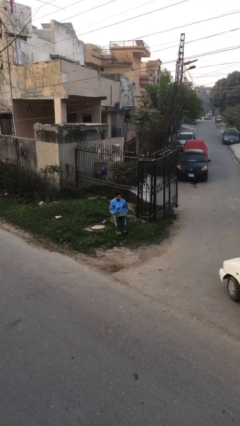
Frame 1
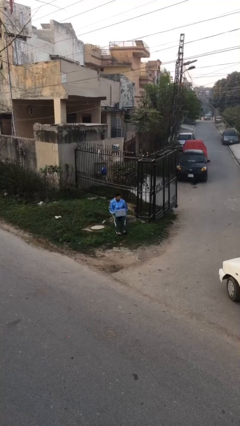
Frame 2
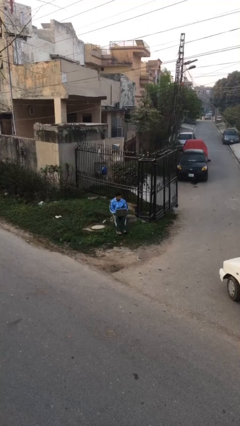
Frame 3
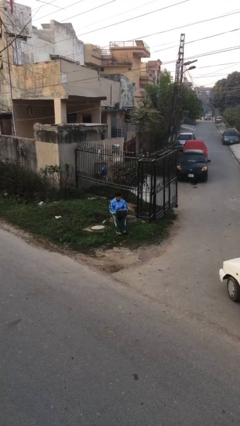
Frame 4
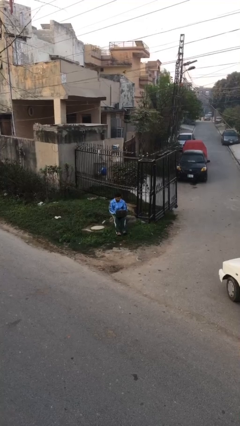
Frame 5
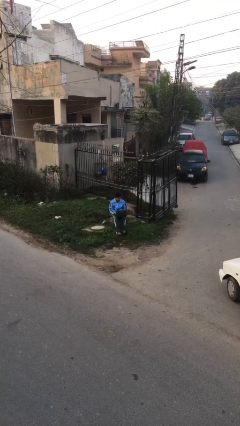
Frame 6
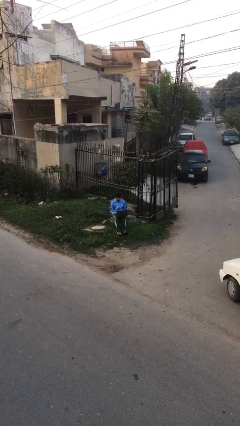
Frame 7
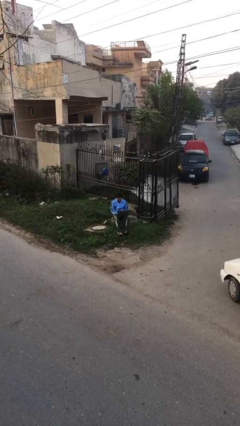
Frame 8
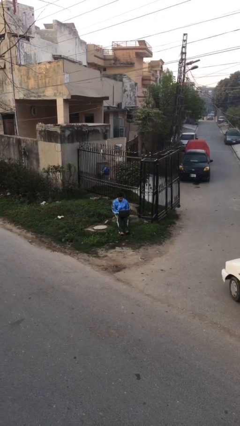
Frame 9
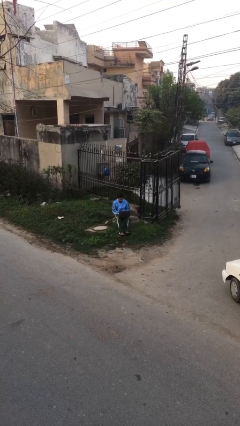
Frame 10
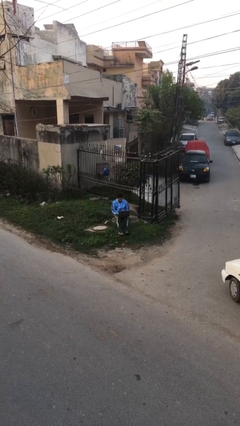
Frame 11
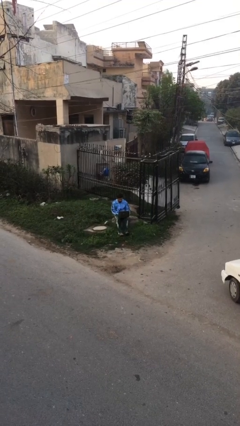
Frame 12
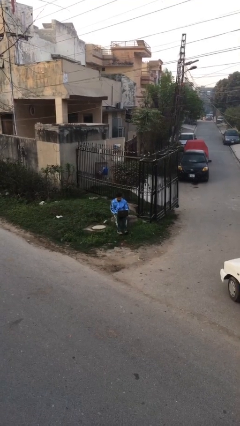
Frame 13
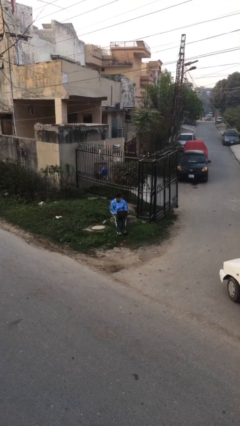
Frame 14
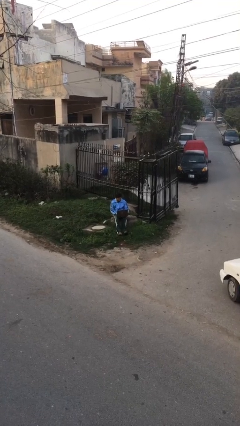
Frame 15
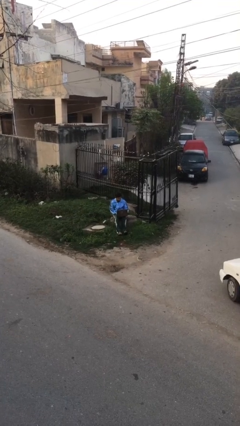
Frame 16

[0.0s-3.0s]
person interacts with laptop

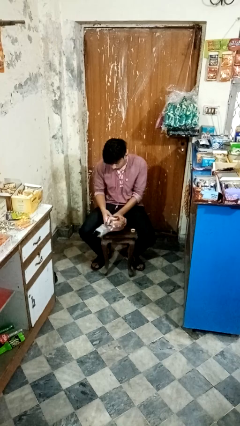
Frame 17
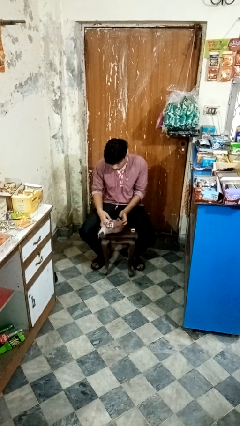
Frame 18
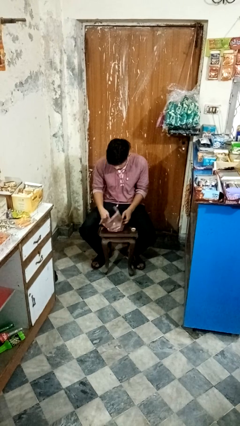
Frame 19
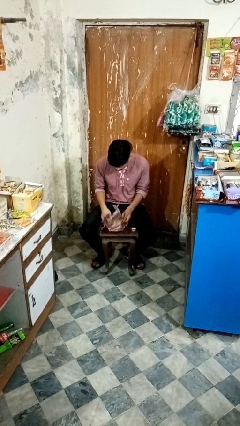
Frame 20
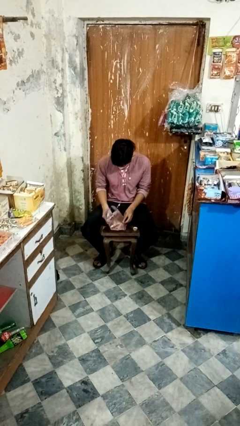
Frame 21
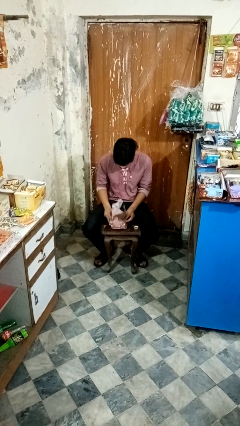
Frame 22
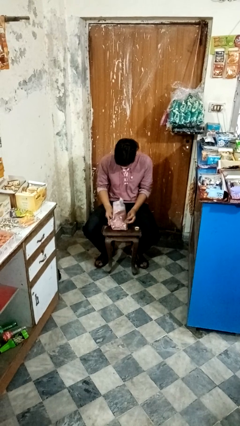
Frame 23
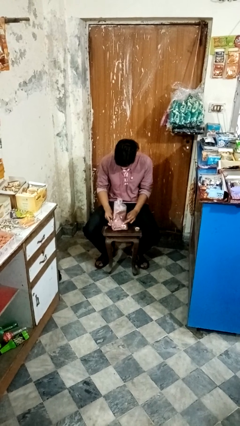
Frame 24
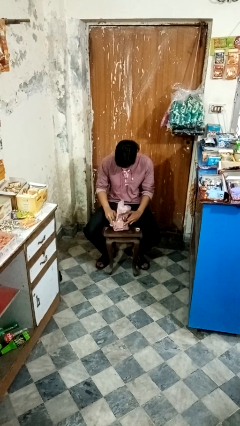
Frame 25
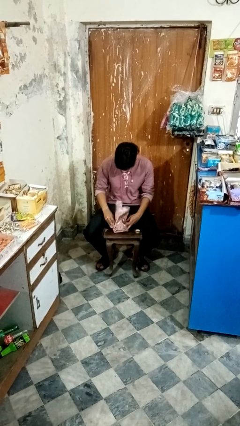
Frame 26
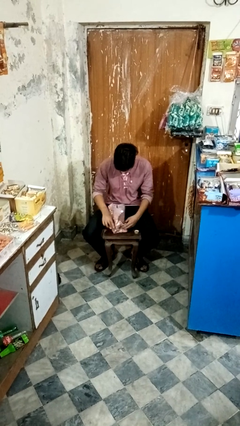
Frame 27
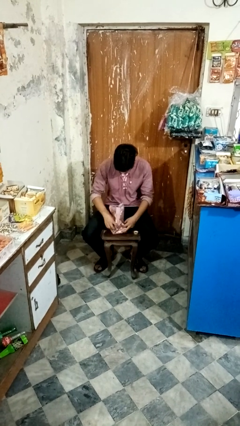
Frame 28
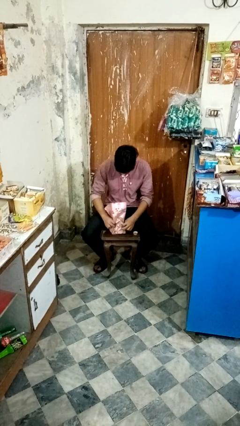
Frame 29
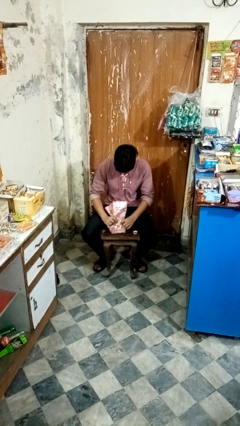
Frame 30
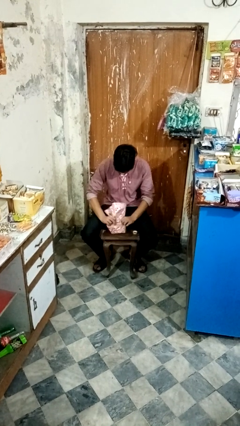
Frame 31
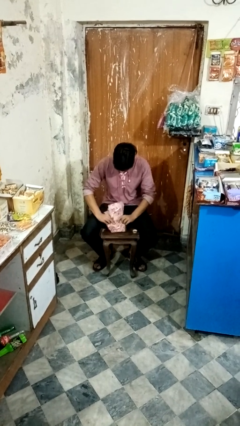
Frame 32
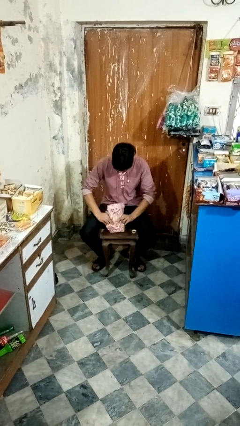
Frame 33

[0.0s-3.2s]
person wraps box

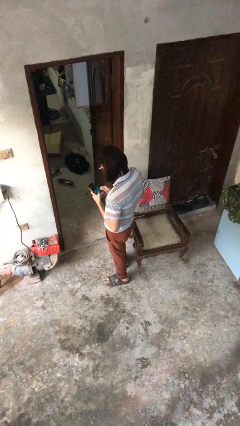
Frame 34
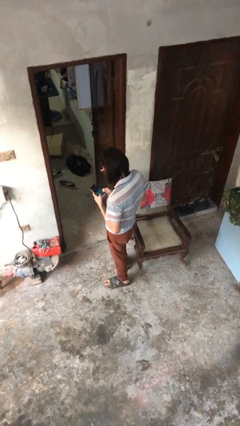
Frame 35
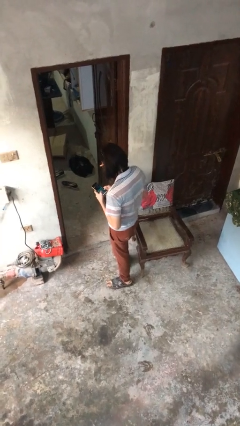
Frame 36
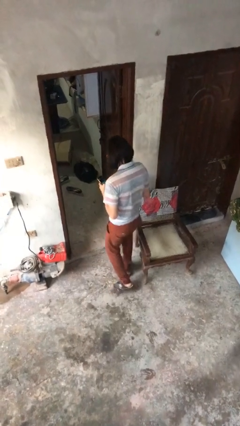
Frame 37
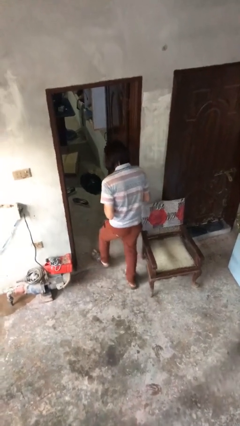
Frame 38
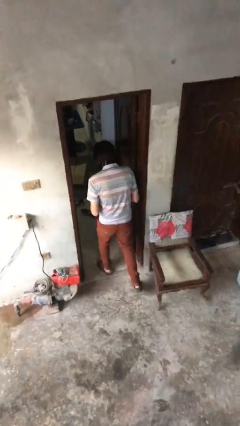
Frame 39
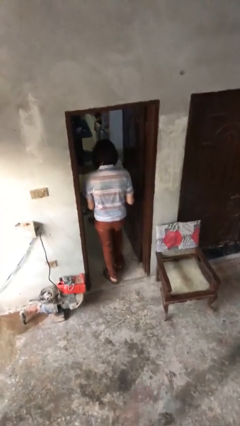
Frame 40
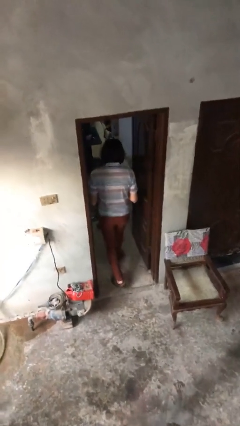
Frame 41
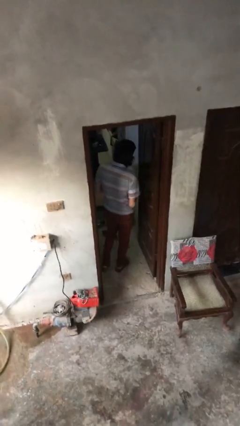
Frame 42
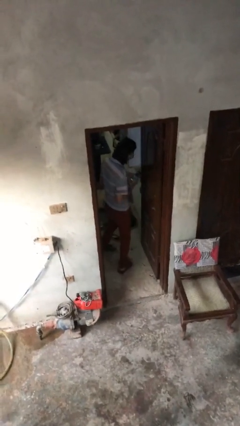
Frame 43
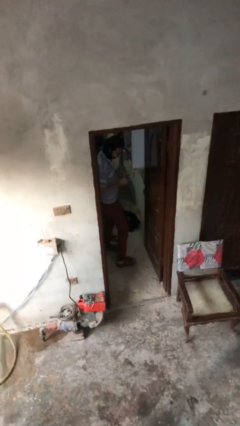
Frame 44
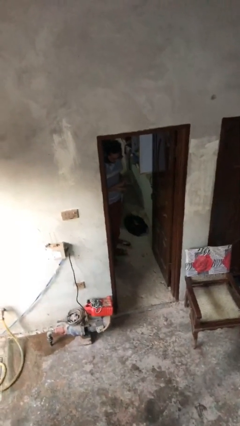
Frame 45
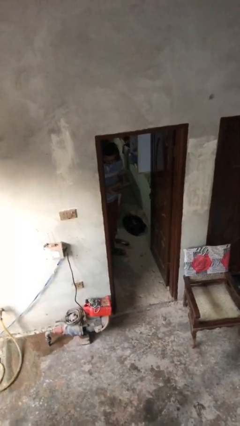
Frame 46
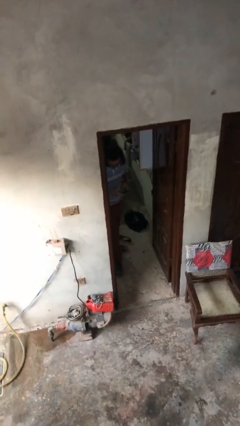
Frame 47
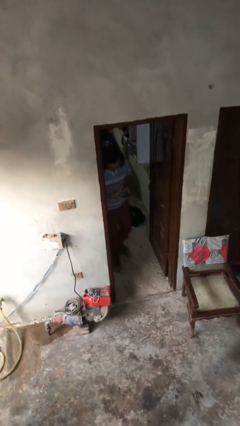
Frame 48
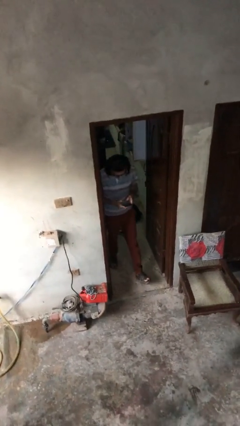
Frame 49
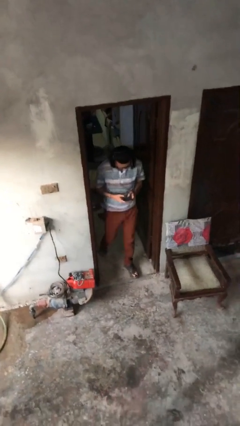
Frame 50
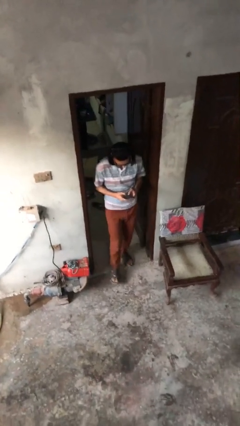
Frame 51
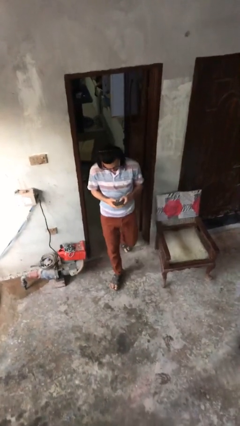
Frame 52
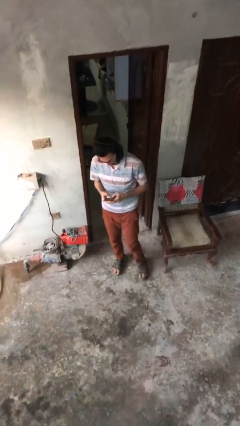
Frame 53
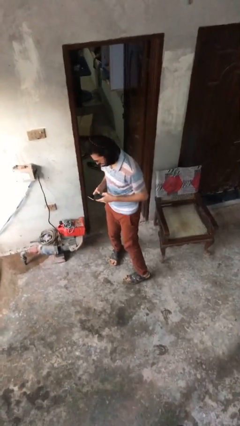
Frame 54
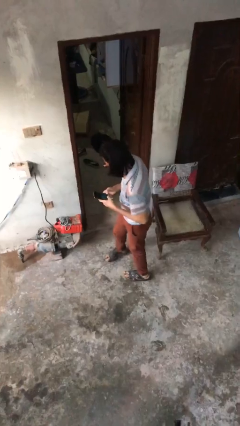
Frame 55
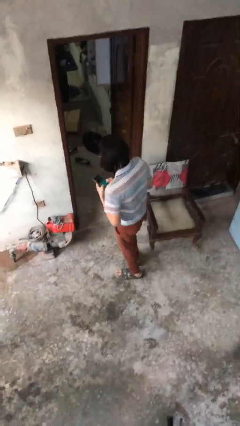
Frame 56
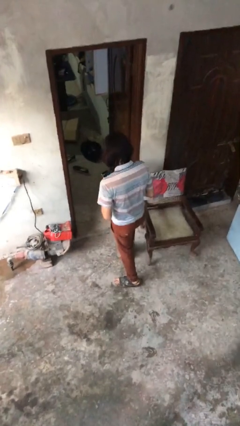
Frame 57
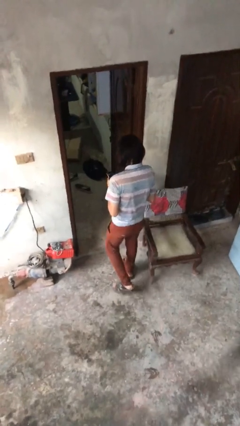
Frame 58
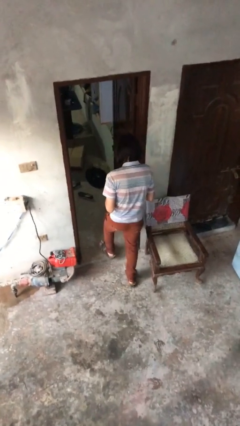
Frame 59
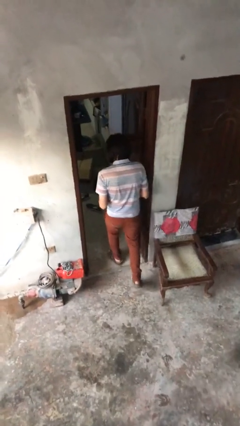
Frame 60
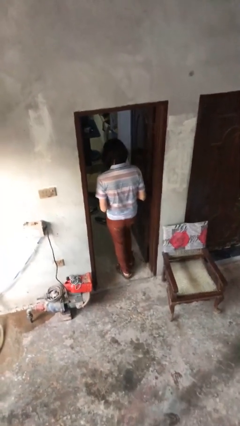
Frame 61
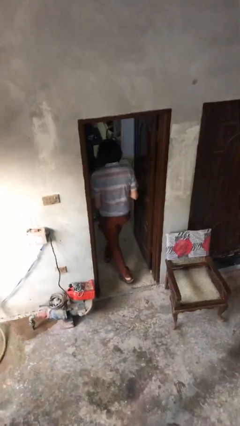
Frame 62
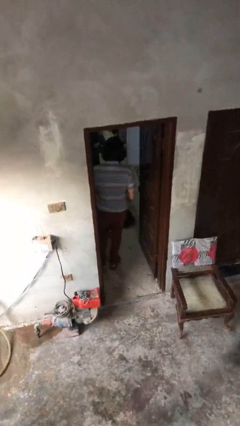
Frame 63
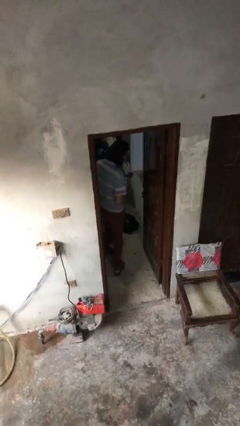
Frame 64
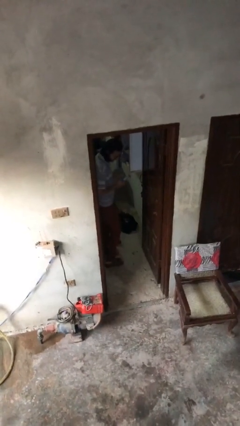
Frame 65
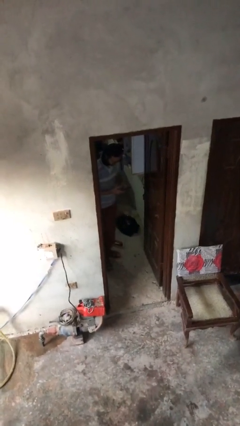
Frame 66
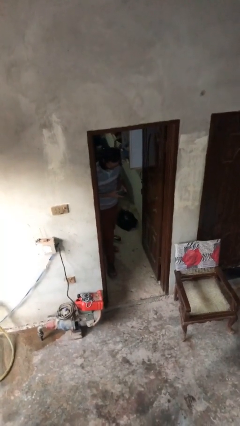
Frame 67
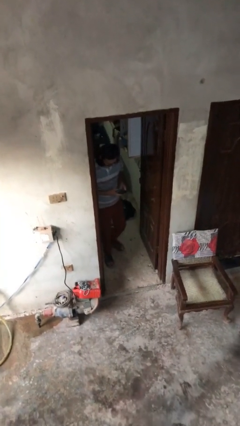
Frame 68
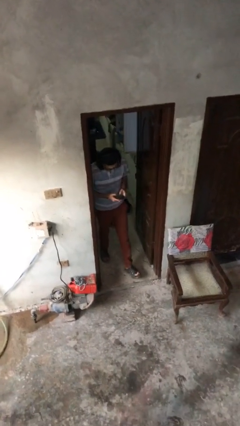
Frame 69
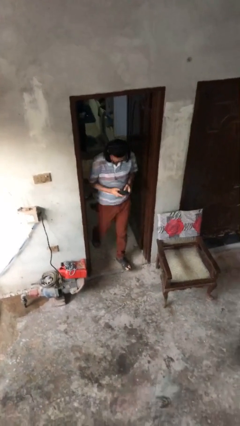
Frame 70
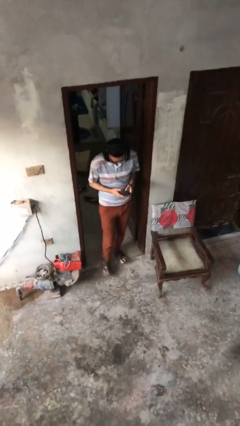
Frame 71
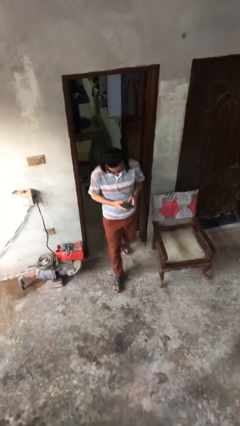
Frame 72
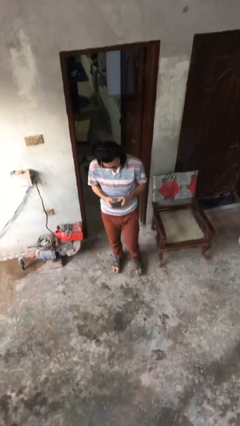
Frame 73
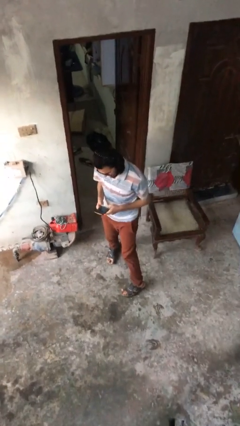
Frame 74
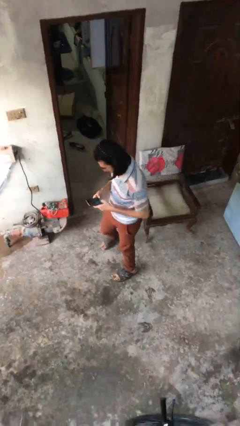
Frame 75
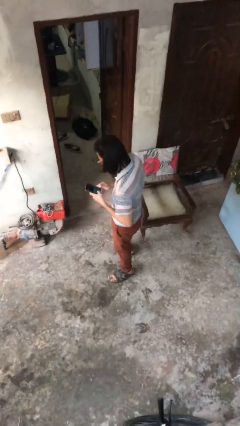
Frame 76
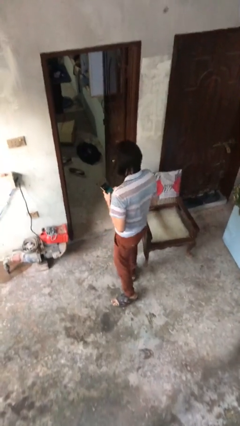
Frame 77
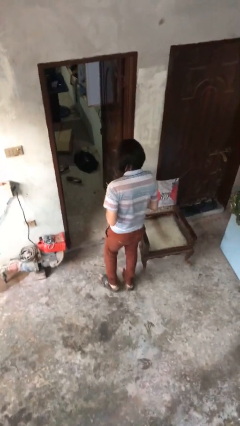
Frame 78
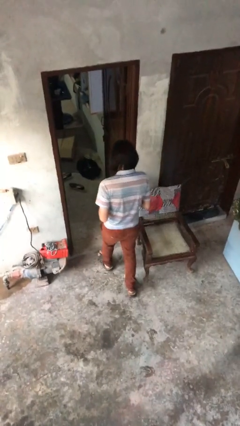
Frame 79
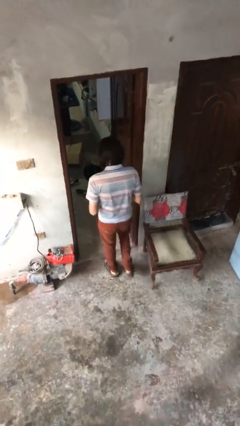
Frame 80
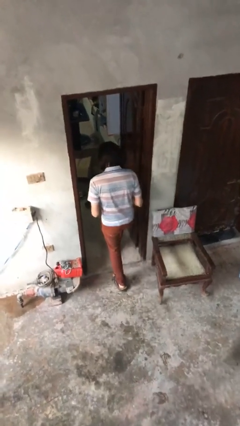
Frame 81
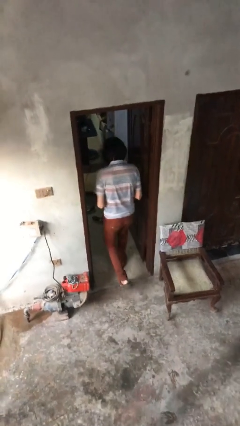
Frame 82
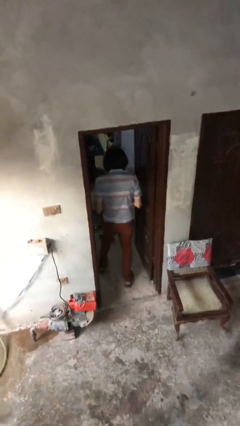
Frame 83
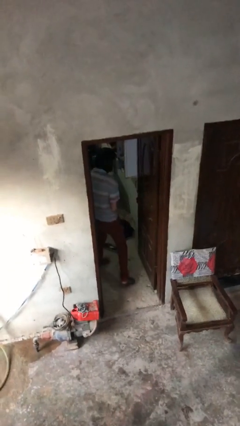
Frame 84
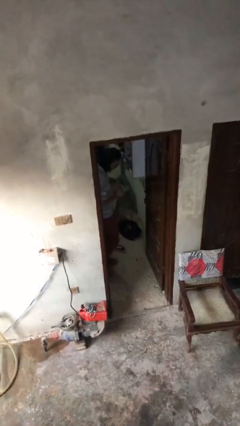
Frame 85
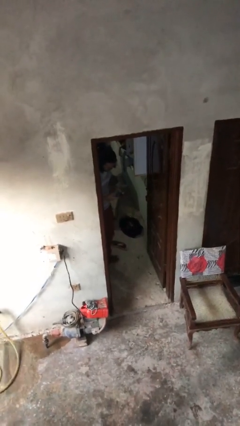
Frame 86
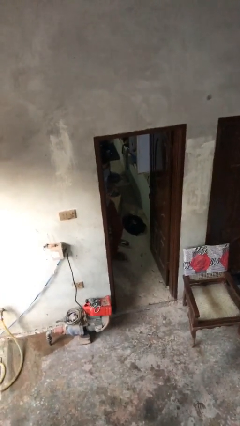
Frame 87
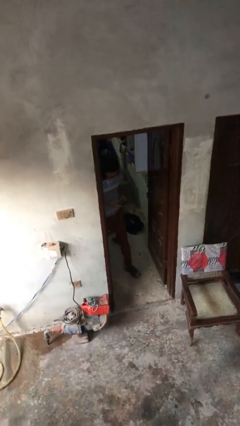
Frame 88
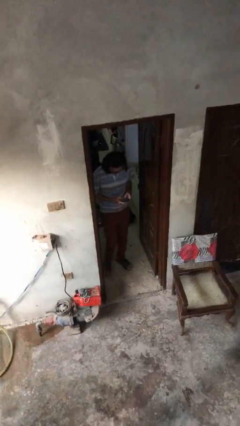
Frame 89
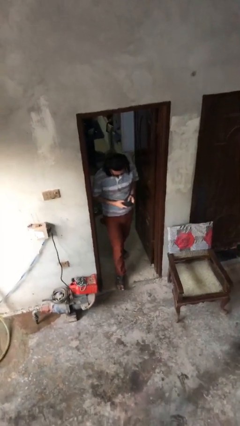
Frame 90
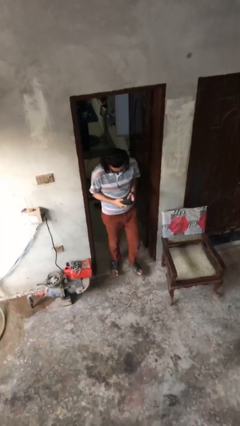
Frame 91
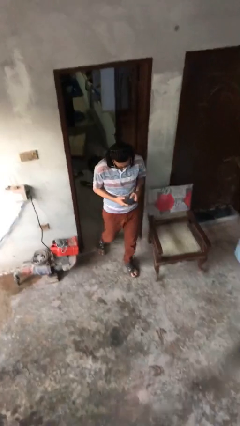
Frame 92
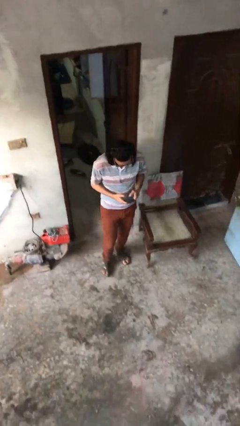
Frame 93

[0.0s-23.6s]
person texts on phone

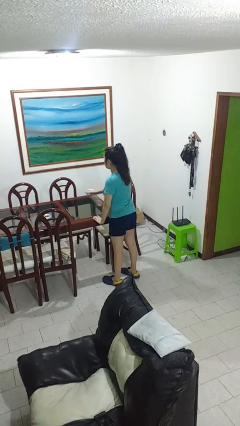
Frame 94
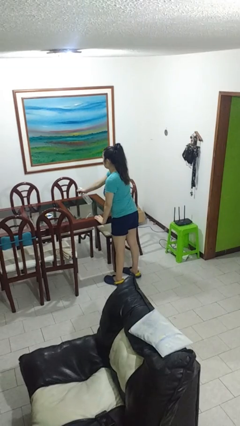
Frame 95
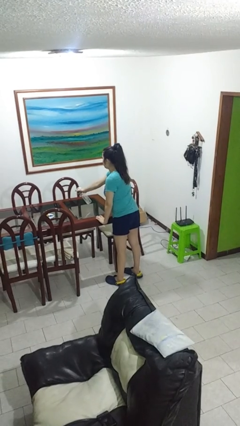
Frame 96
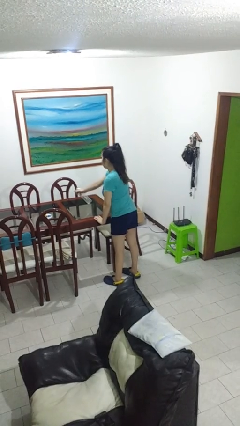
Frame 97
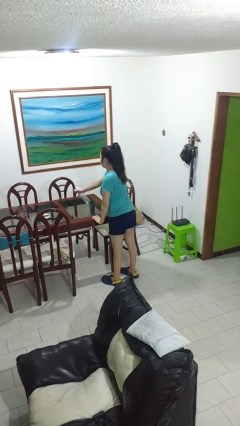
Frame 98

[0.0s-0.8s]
person sprays from bottle
